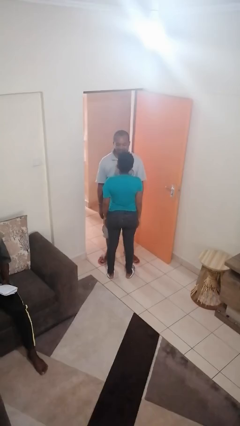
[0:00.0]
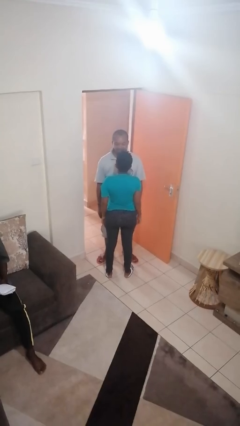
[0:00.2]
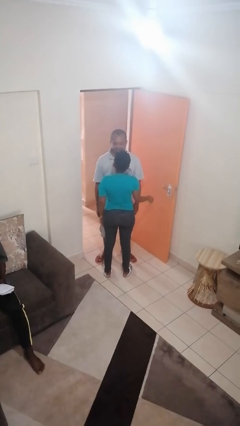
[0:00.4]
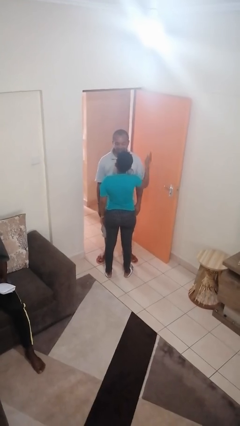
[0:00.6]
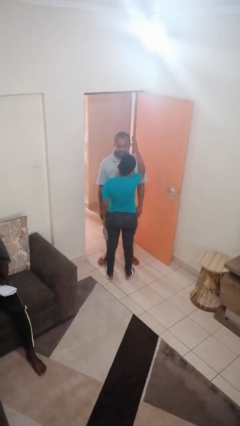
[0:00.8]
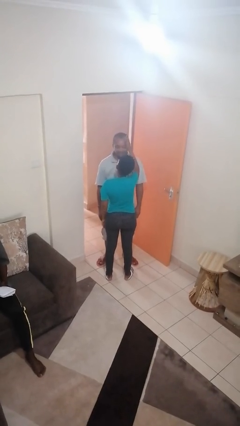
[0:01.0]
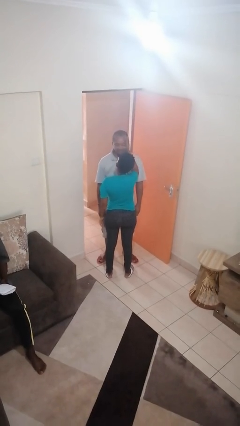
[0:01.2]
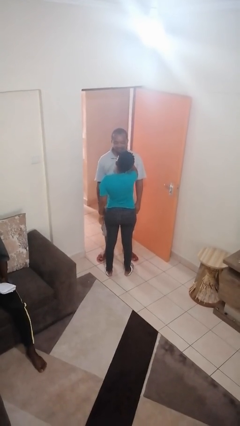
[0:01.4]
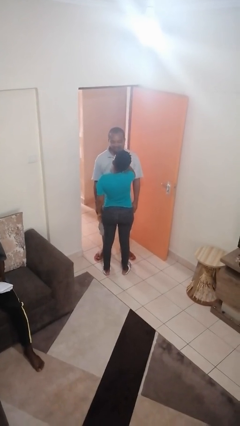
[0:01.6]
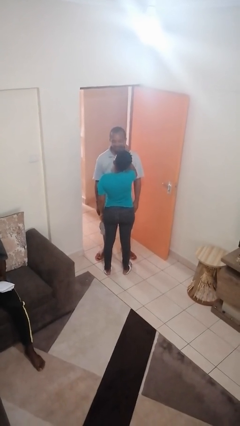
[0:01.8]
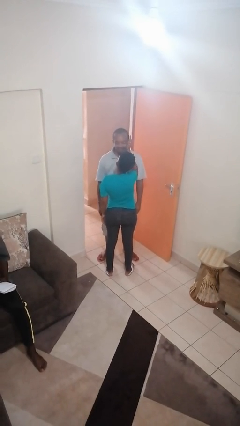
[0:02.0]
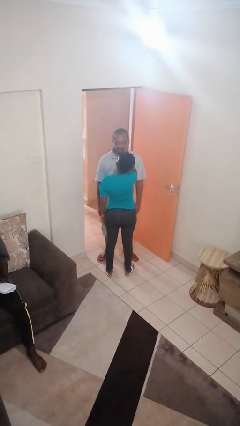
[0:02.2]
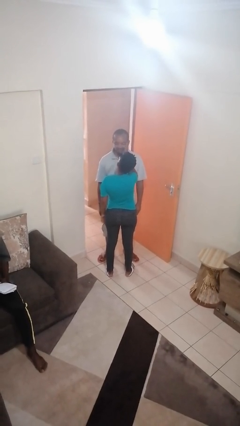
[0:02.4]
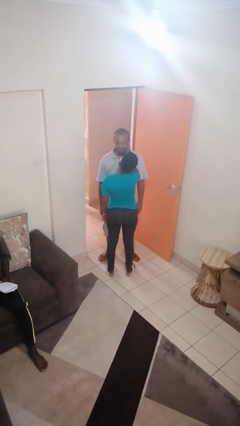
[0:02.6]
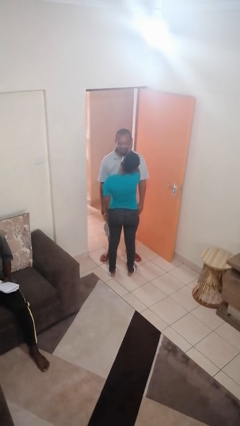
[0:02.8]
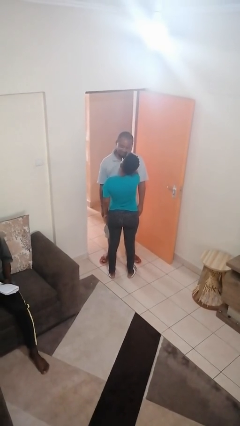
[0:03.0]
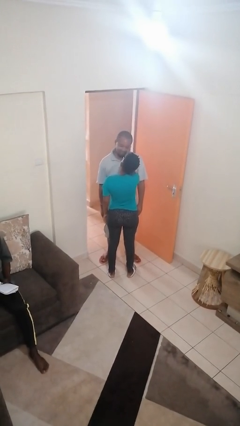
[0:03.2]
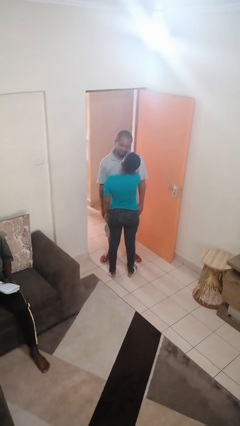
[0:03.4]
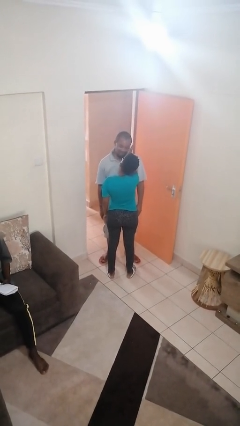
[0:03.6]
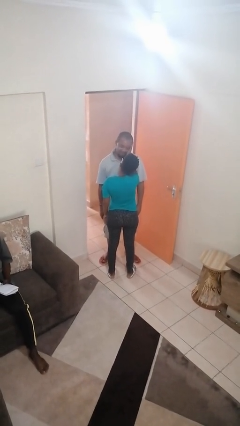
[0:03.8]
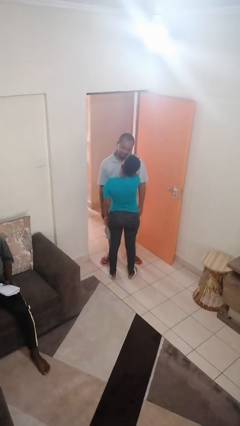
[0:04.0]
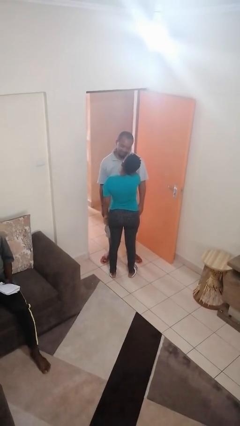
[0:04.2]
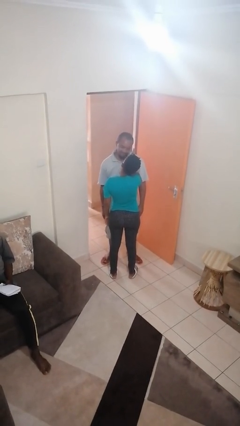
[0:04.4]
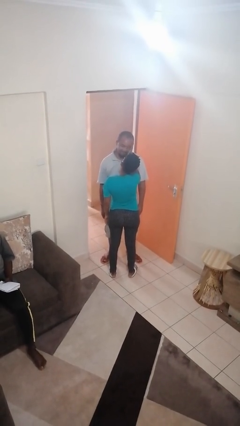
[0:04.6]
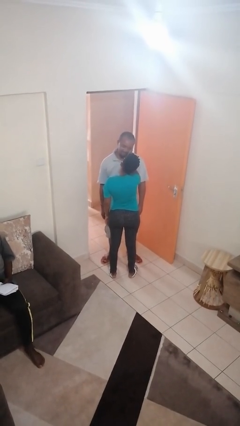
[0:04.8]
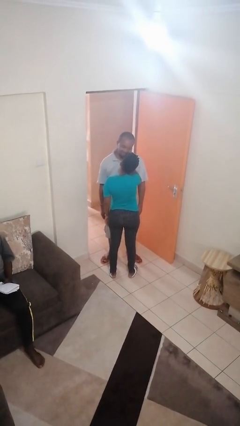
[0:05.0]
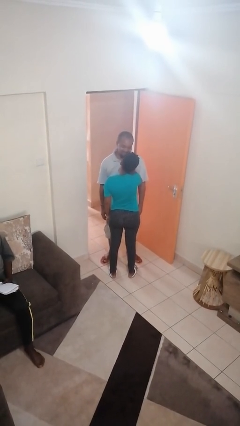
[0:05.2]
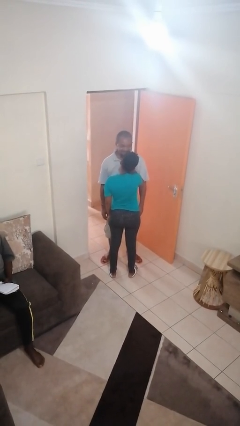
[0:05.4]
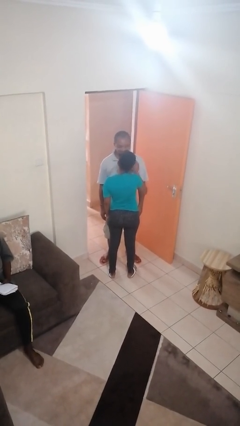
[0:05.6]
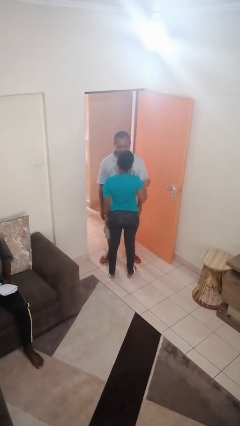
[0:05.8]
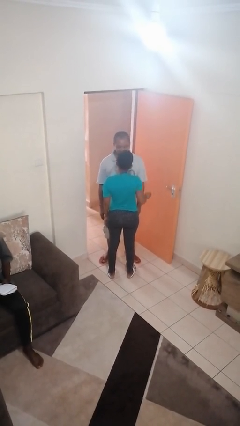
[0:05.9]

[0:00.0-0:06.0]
person touches face of person

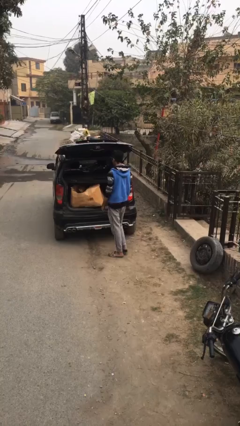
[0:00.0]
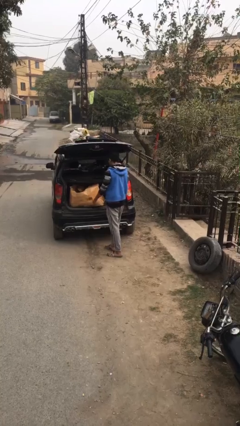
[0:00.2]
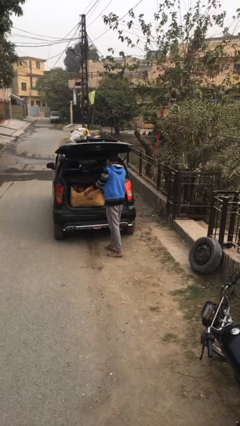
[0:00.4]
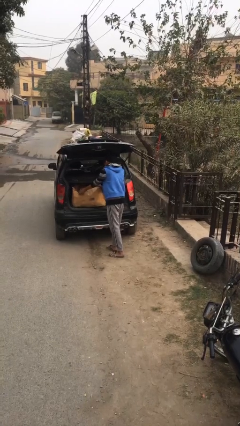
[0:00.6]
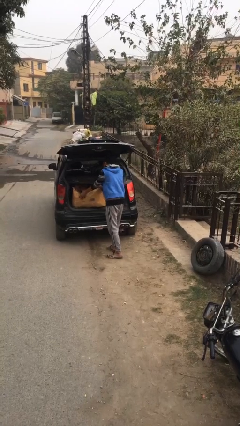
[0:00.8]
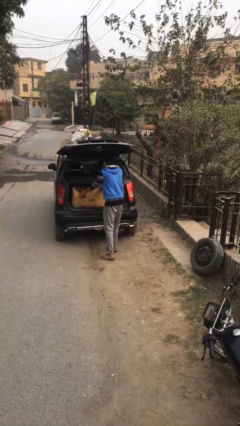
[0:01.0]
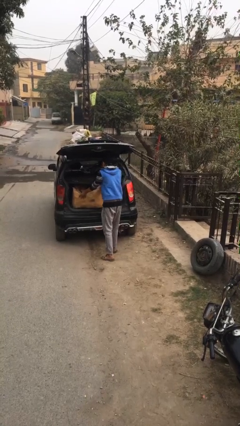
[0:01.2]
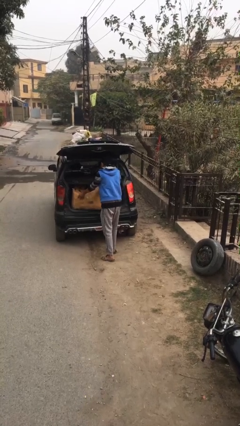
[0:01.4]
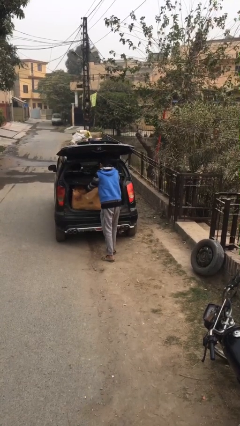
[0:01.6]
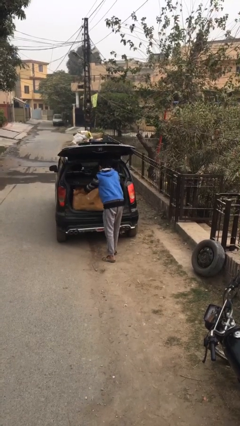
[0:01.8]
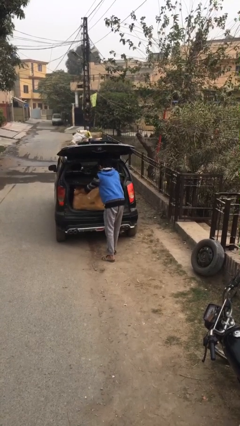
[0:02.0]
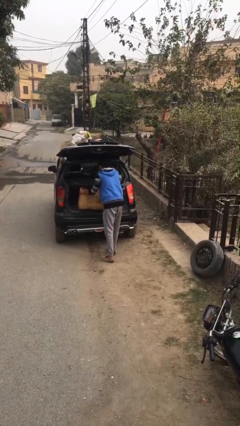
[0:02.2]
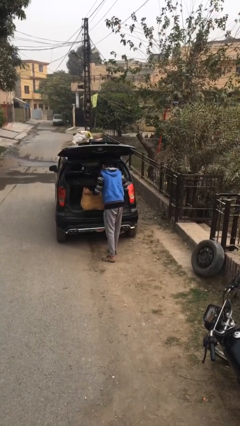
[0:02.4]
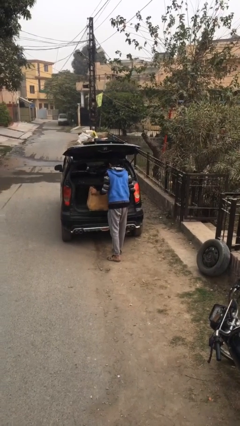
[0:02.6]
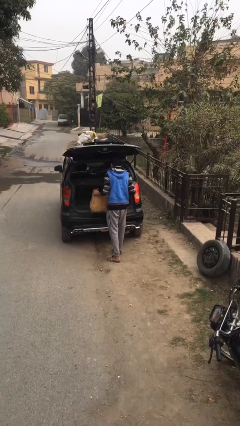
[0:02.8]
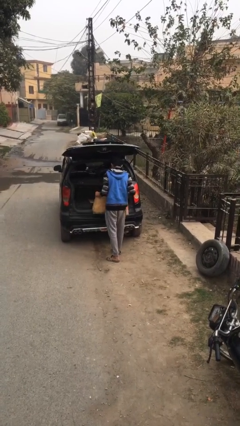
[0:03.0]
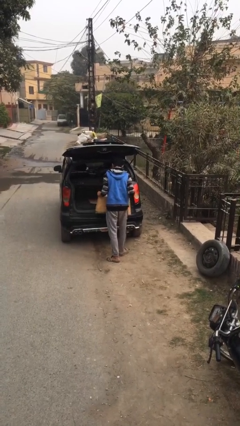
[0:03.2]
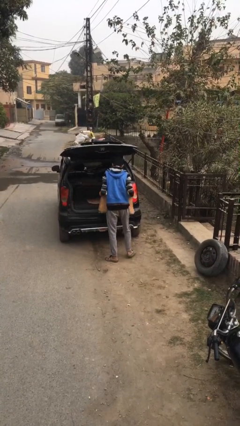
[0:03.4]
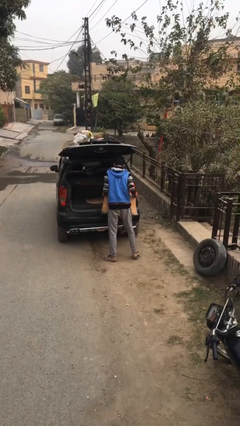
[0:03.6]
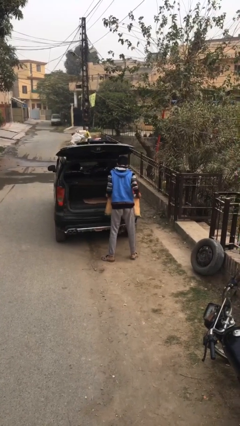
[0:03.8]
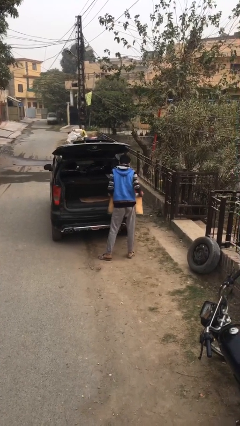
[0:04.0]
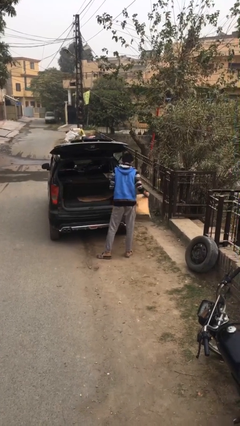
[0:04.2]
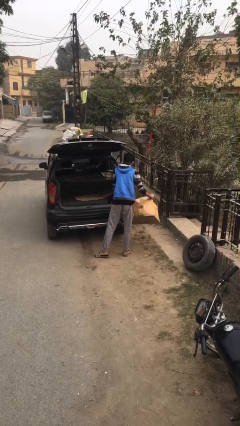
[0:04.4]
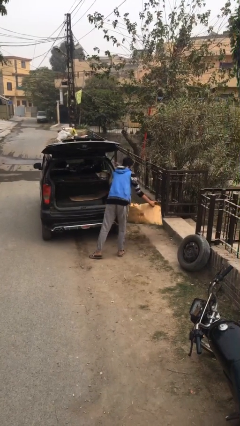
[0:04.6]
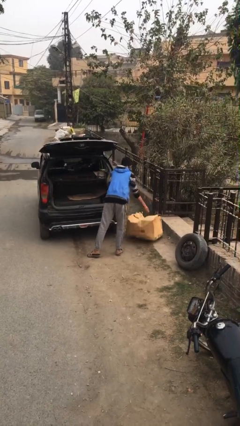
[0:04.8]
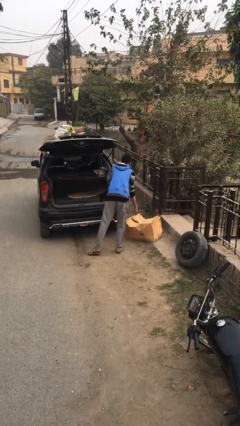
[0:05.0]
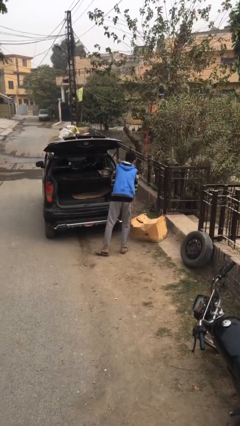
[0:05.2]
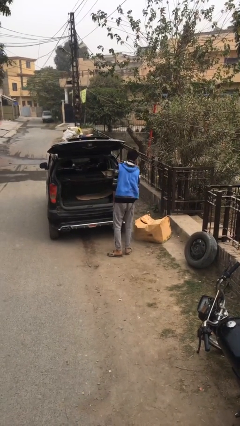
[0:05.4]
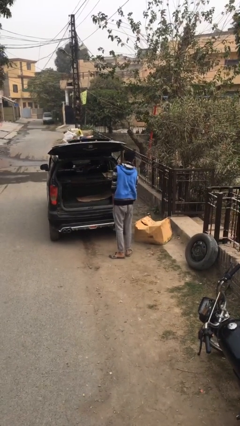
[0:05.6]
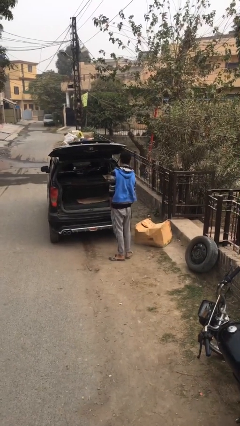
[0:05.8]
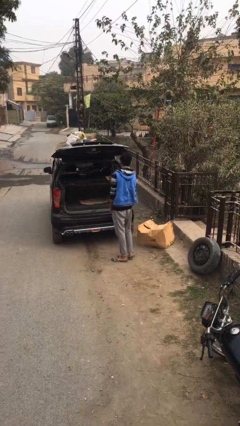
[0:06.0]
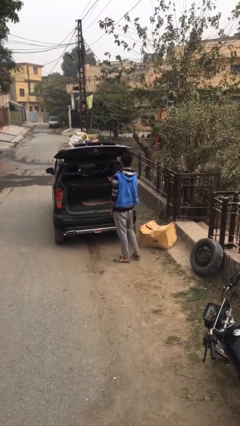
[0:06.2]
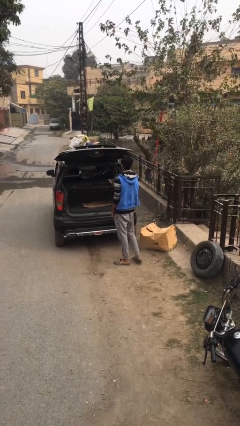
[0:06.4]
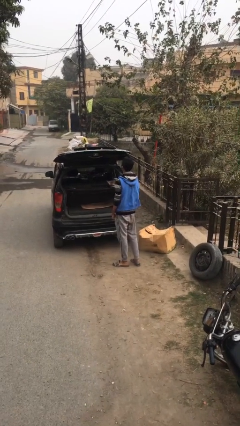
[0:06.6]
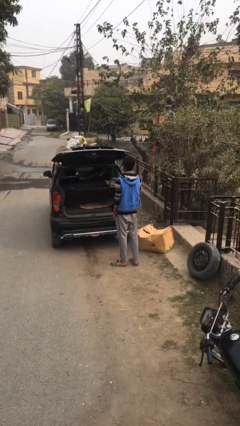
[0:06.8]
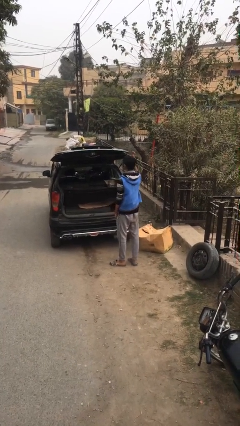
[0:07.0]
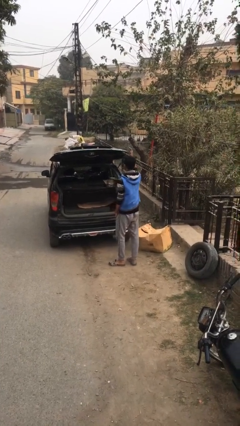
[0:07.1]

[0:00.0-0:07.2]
person unloads car

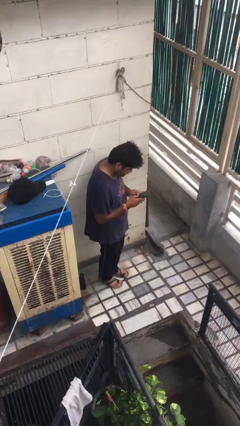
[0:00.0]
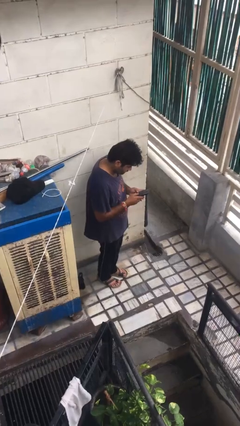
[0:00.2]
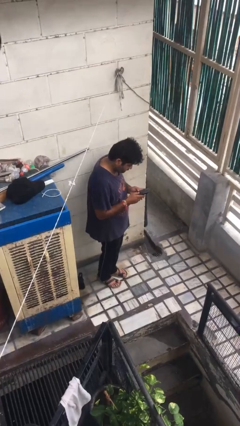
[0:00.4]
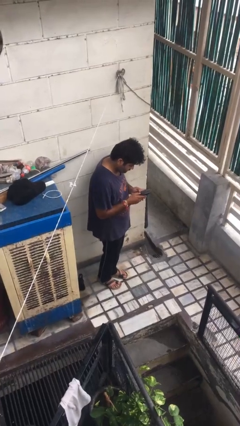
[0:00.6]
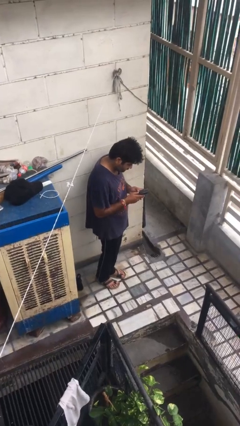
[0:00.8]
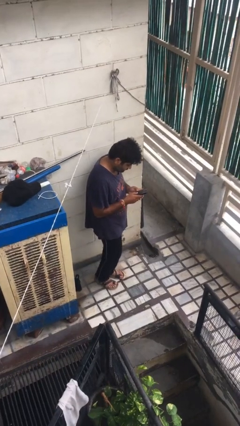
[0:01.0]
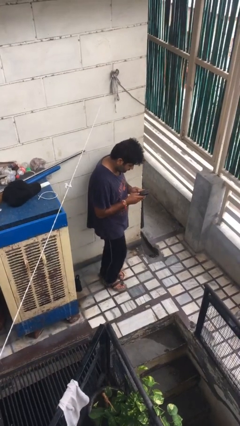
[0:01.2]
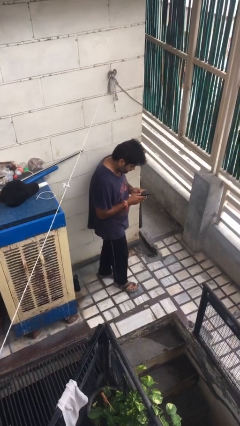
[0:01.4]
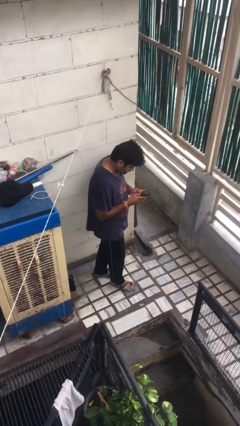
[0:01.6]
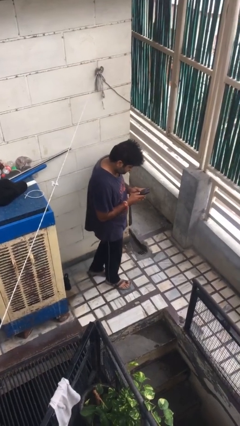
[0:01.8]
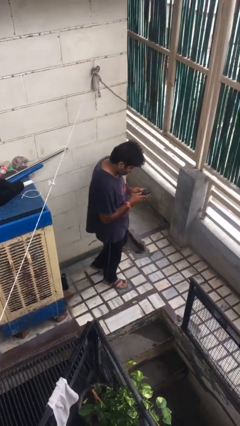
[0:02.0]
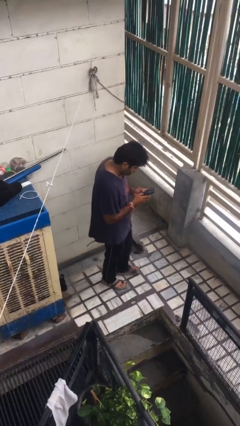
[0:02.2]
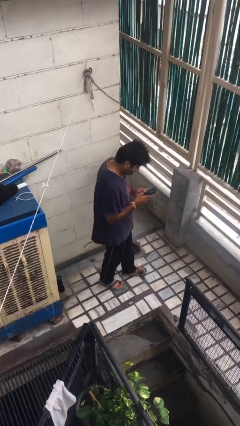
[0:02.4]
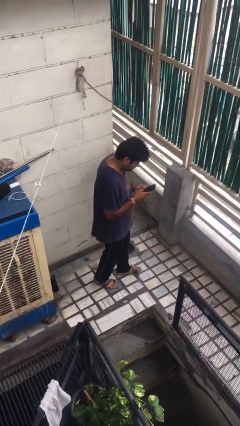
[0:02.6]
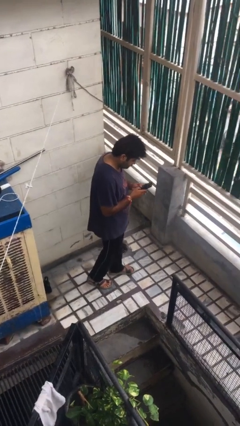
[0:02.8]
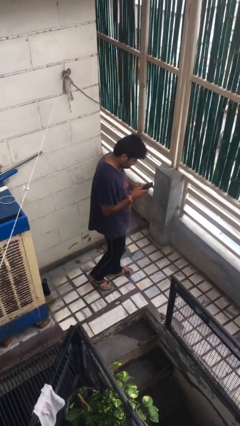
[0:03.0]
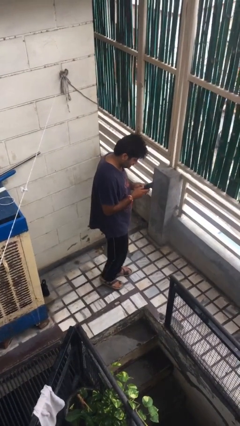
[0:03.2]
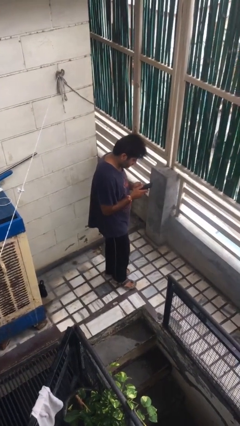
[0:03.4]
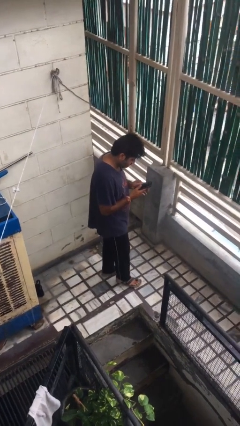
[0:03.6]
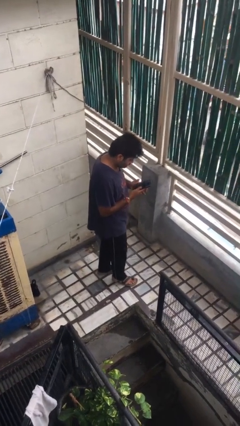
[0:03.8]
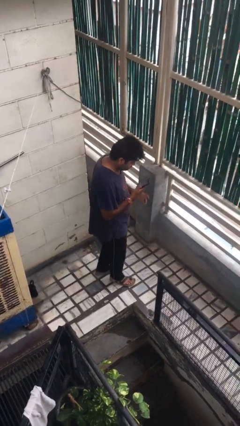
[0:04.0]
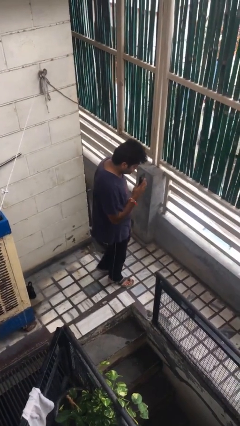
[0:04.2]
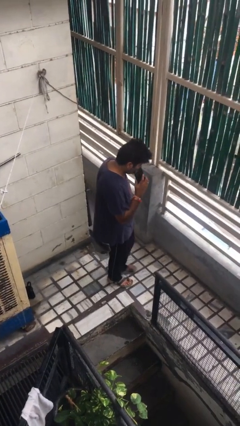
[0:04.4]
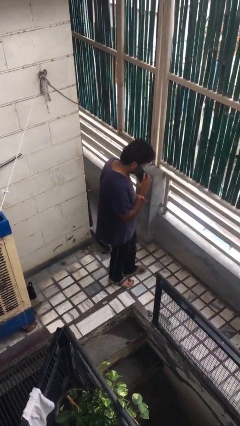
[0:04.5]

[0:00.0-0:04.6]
person texts on phone

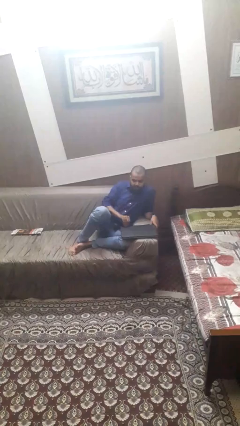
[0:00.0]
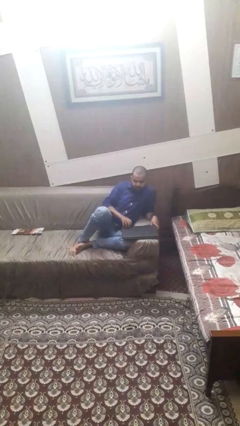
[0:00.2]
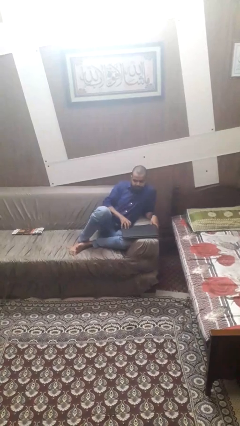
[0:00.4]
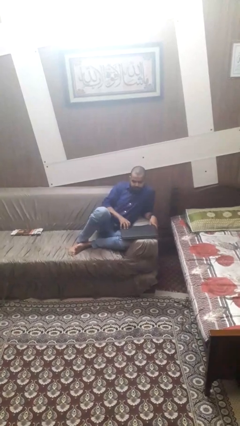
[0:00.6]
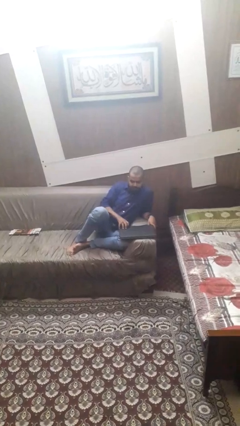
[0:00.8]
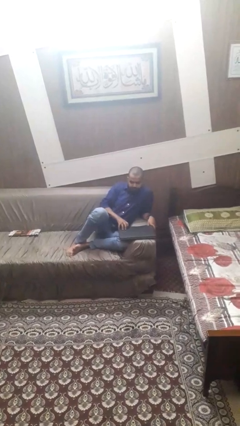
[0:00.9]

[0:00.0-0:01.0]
person closes laptop
